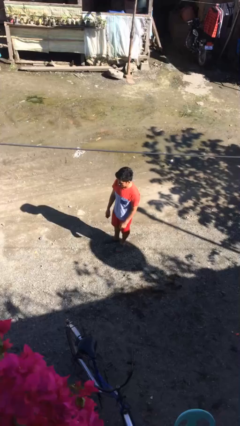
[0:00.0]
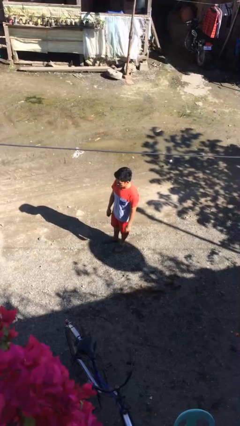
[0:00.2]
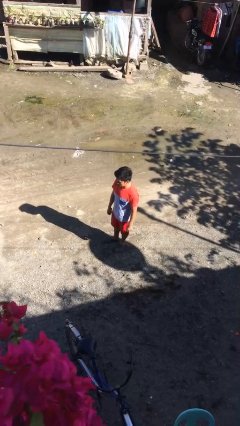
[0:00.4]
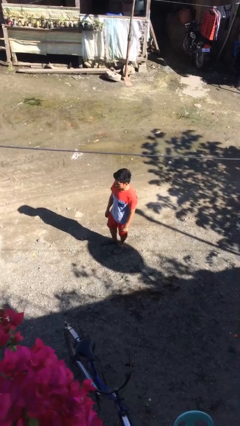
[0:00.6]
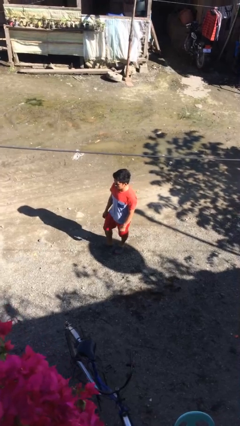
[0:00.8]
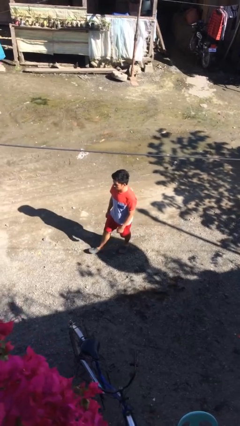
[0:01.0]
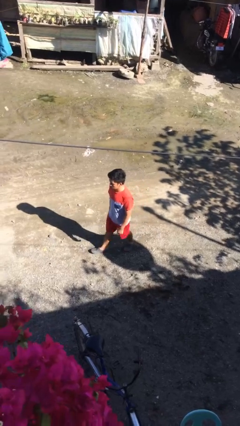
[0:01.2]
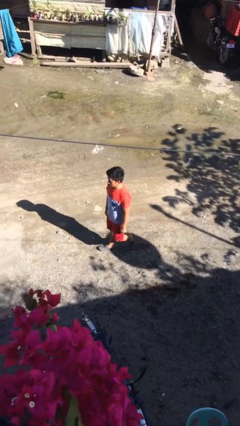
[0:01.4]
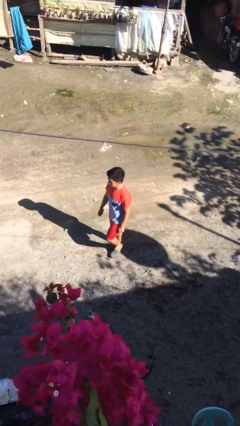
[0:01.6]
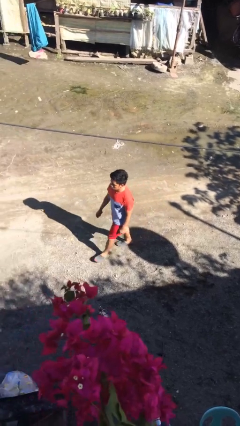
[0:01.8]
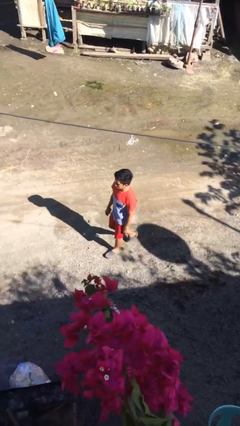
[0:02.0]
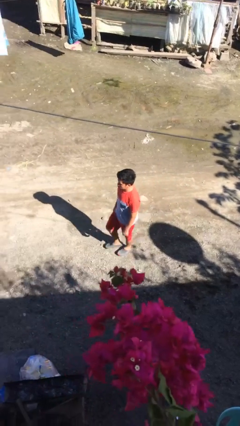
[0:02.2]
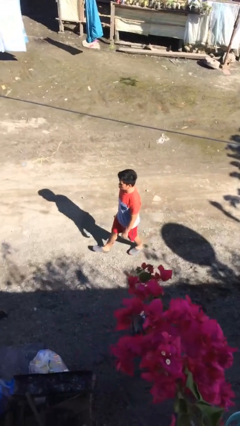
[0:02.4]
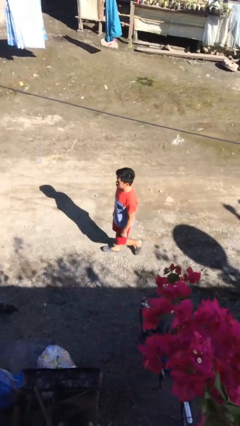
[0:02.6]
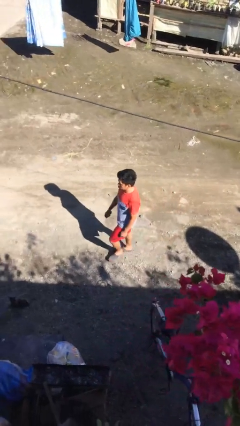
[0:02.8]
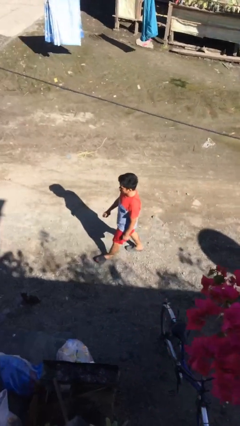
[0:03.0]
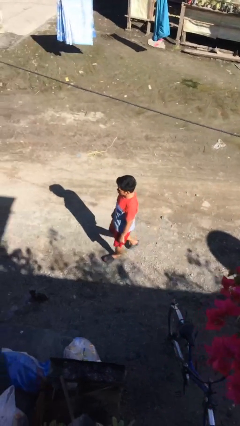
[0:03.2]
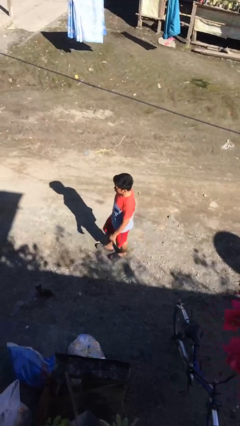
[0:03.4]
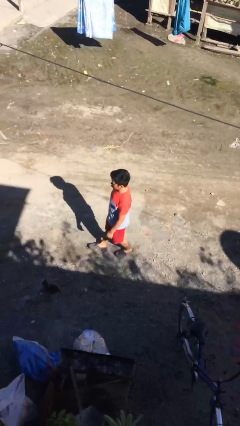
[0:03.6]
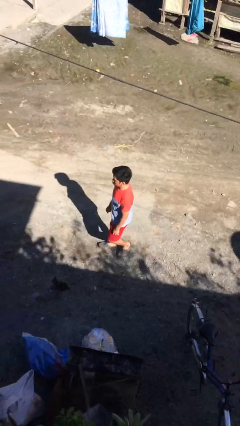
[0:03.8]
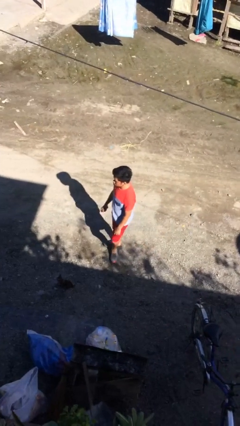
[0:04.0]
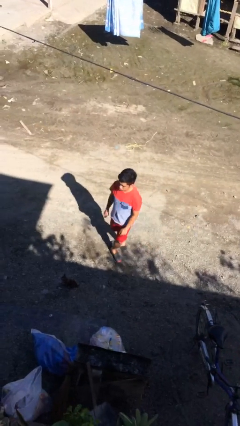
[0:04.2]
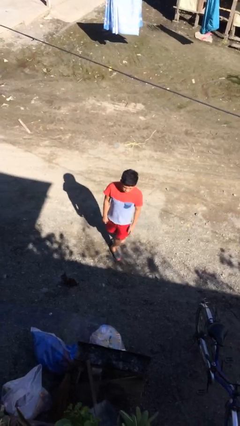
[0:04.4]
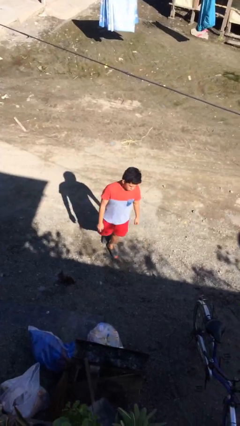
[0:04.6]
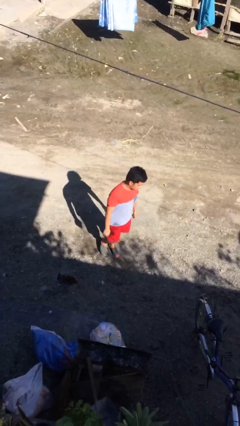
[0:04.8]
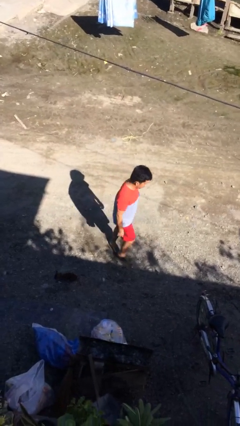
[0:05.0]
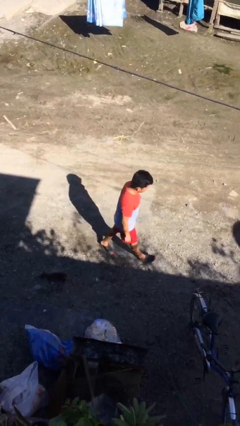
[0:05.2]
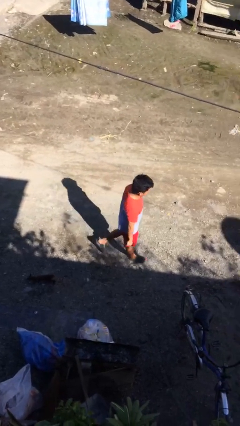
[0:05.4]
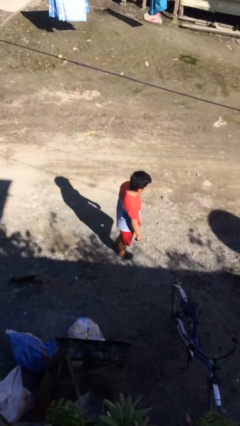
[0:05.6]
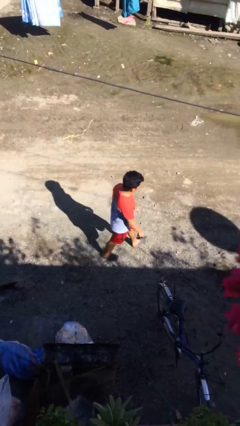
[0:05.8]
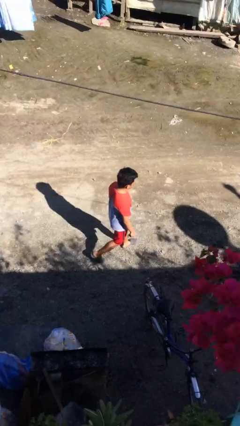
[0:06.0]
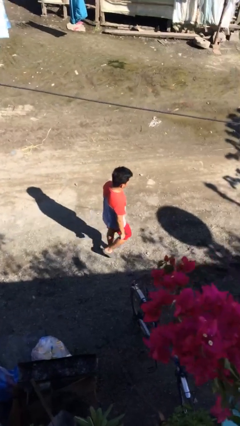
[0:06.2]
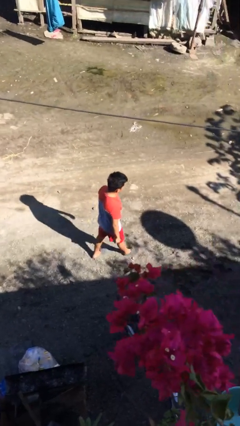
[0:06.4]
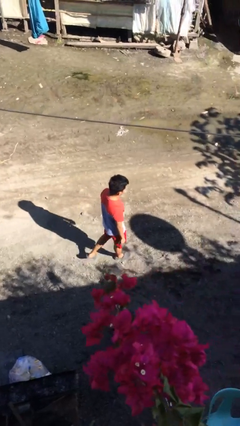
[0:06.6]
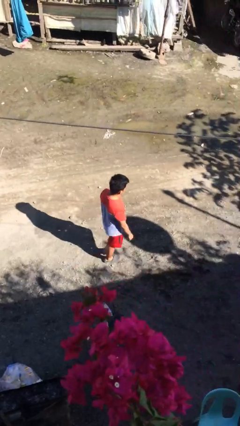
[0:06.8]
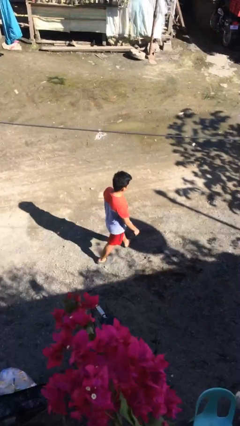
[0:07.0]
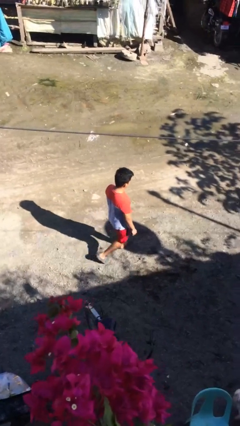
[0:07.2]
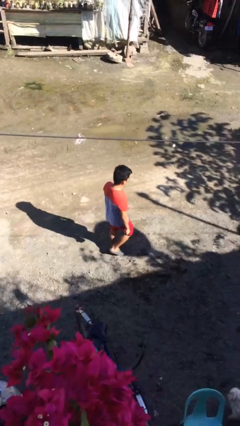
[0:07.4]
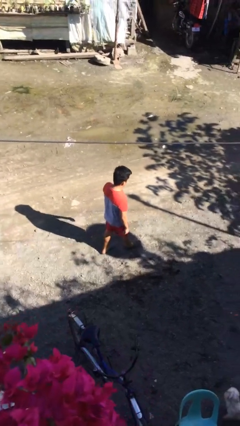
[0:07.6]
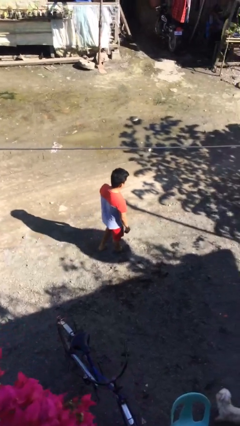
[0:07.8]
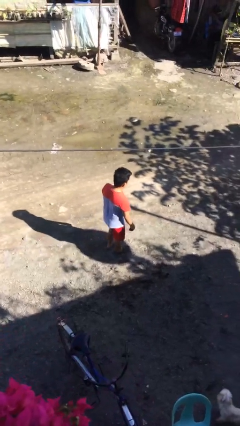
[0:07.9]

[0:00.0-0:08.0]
person walks

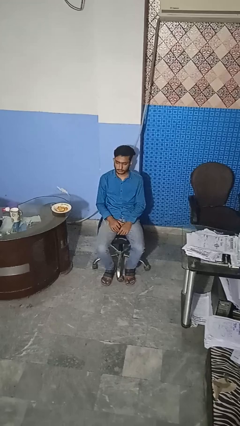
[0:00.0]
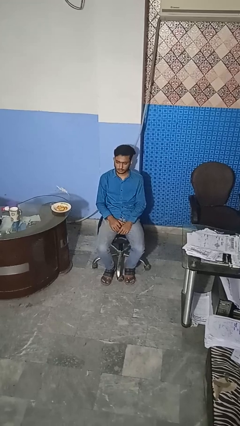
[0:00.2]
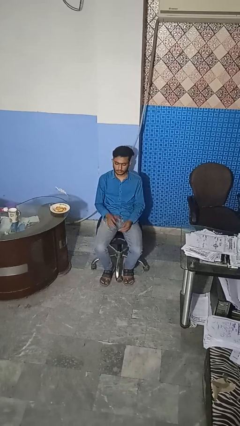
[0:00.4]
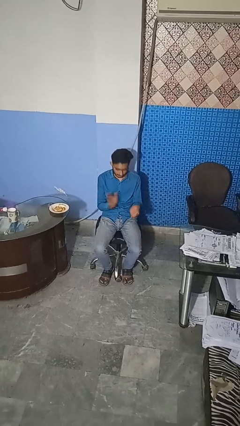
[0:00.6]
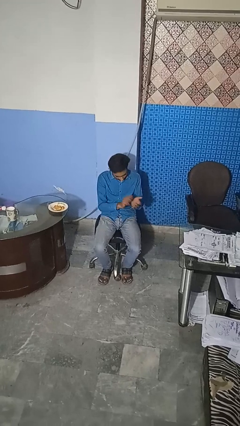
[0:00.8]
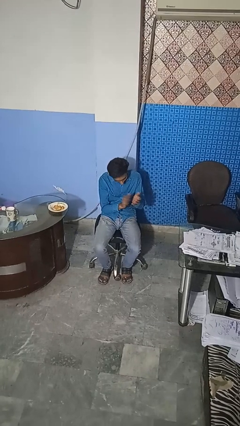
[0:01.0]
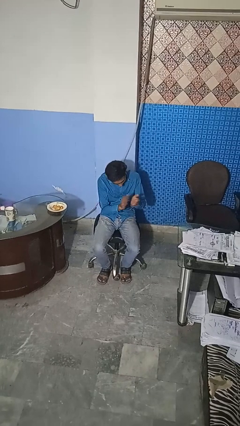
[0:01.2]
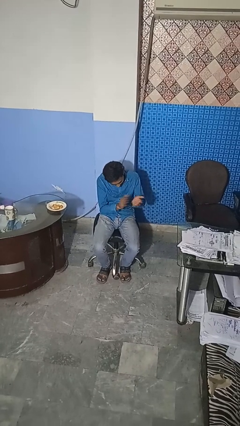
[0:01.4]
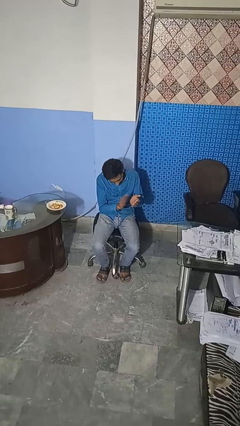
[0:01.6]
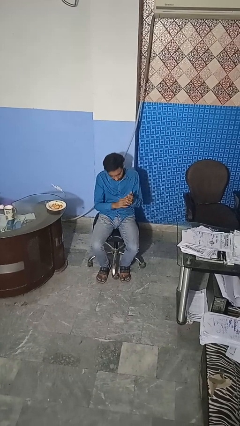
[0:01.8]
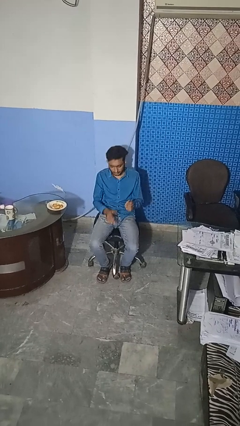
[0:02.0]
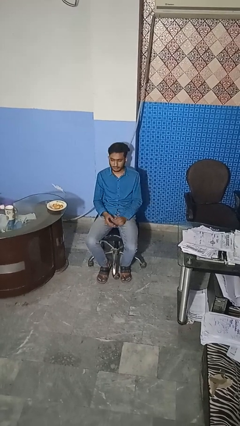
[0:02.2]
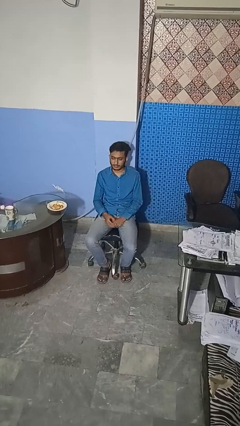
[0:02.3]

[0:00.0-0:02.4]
person claps hands

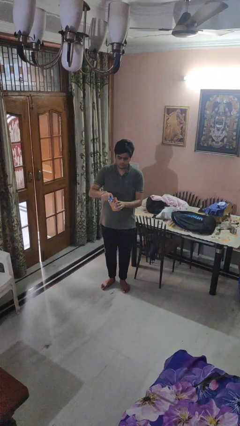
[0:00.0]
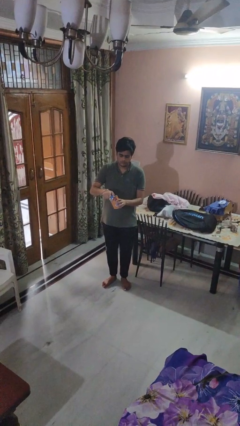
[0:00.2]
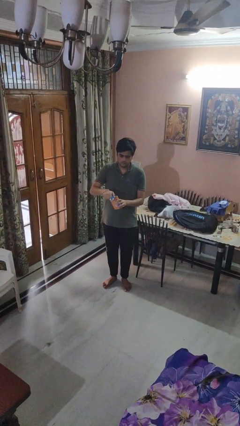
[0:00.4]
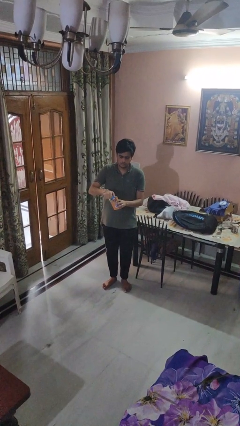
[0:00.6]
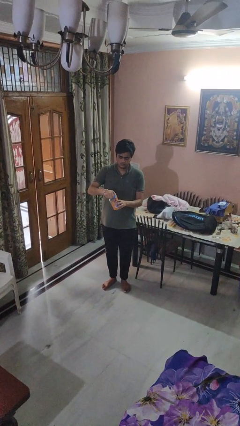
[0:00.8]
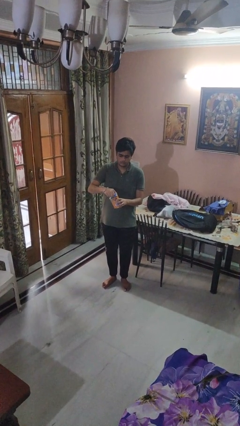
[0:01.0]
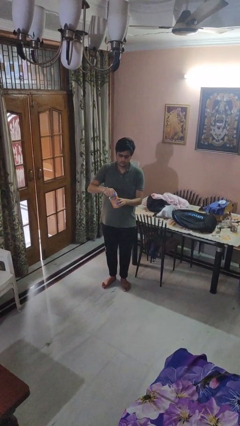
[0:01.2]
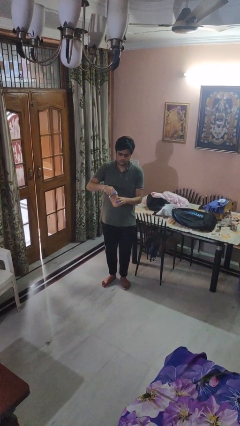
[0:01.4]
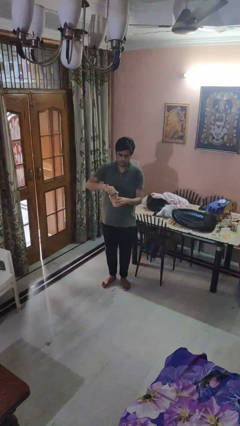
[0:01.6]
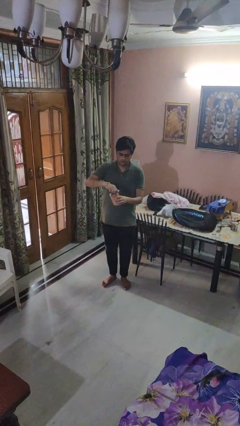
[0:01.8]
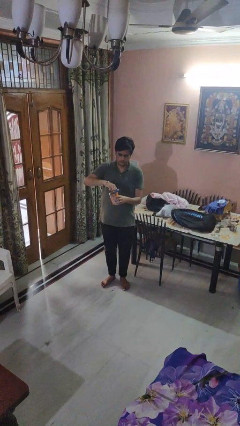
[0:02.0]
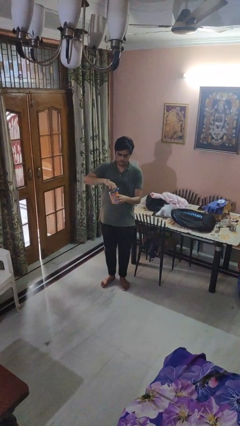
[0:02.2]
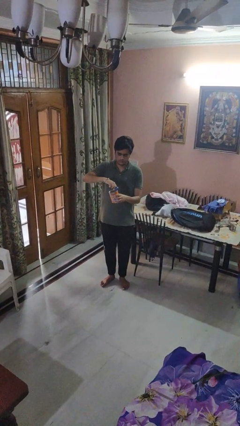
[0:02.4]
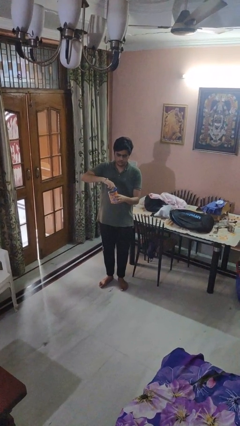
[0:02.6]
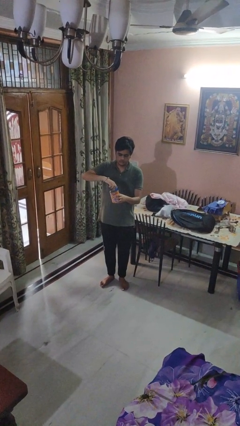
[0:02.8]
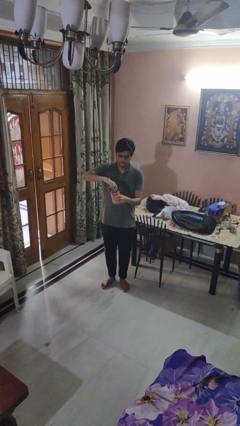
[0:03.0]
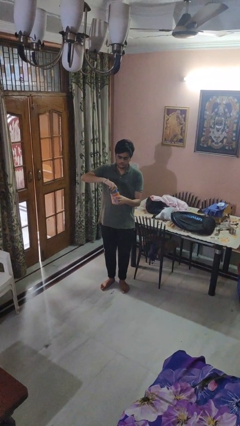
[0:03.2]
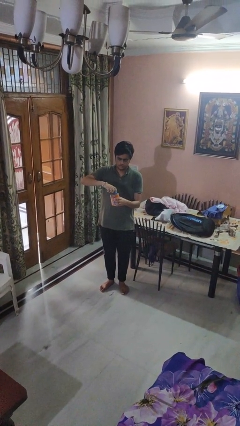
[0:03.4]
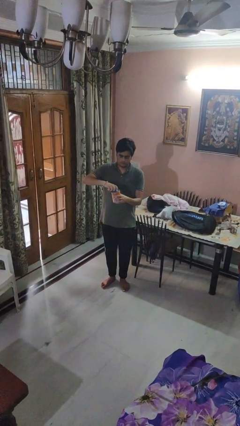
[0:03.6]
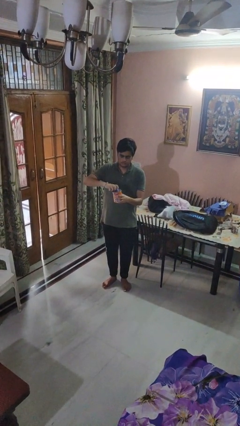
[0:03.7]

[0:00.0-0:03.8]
person opens can with can opener

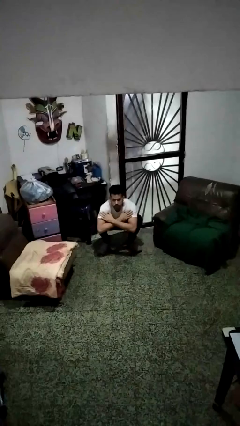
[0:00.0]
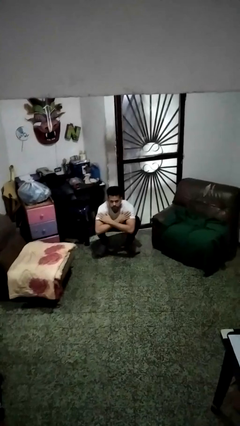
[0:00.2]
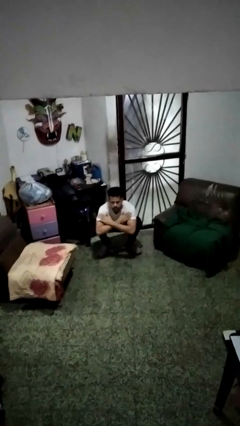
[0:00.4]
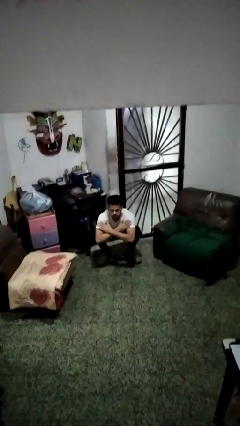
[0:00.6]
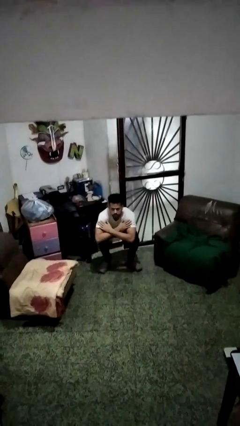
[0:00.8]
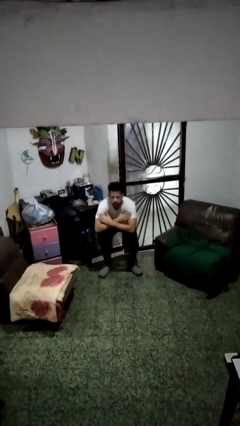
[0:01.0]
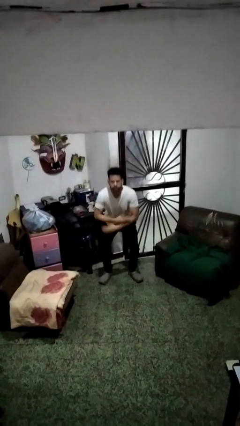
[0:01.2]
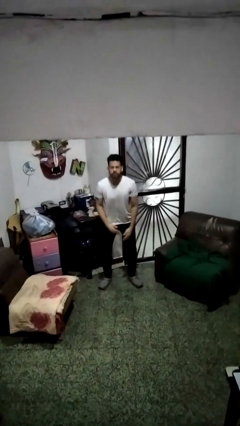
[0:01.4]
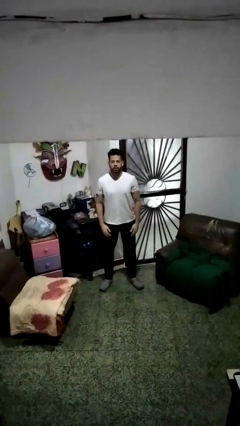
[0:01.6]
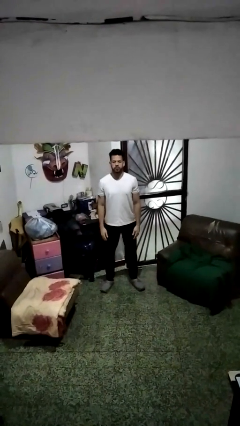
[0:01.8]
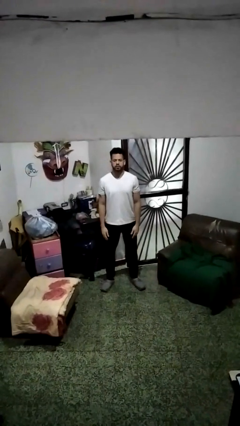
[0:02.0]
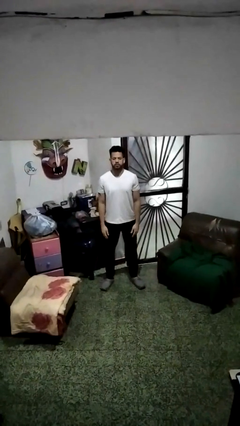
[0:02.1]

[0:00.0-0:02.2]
person stands up

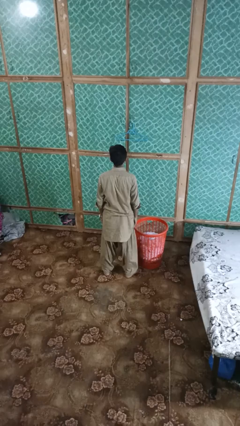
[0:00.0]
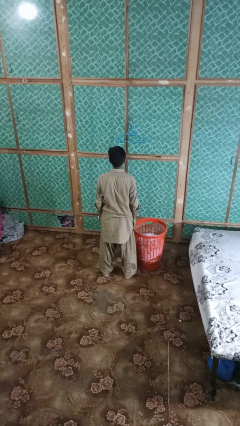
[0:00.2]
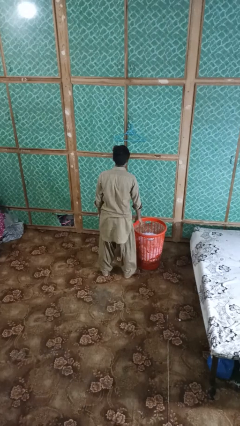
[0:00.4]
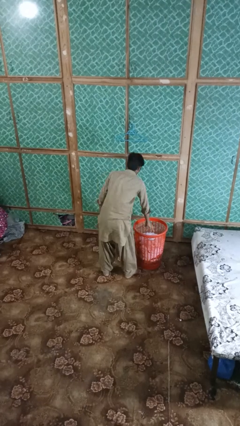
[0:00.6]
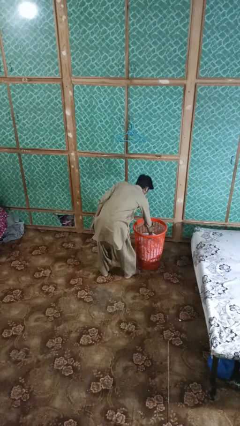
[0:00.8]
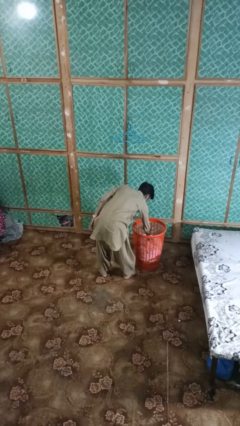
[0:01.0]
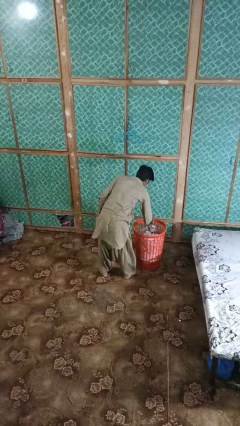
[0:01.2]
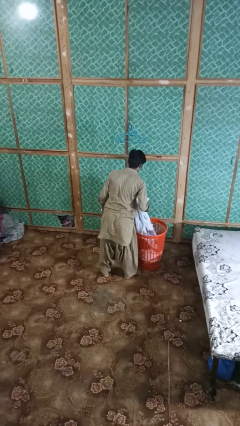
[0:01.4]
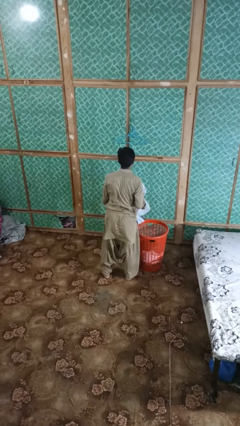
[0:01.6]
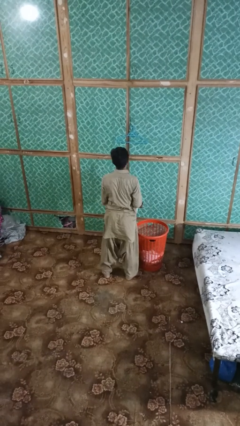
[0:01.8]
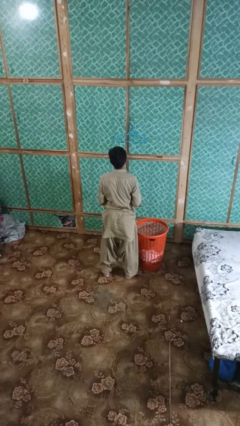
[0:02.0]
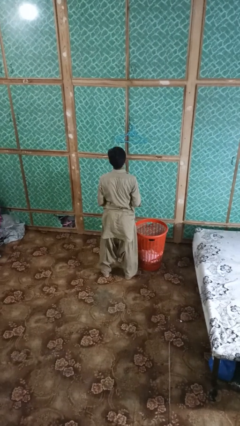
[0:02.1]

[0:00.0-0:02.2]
person takes object from basket
